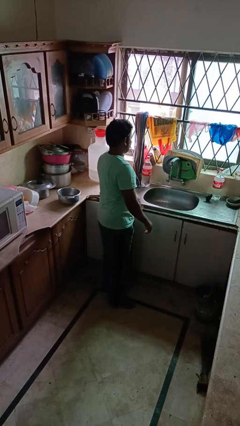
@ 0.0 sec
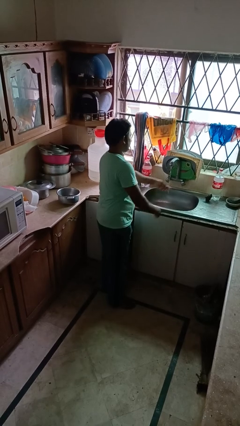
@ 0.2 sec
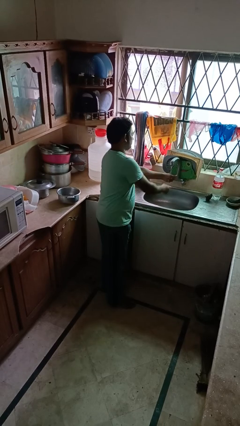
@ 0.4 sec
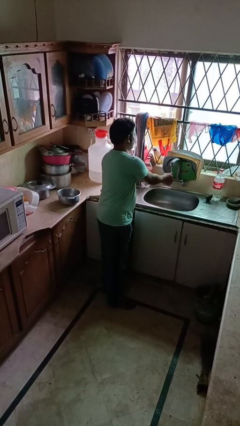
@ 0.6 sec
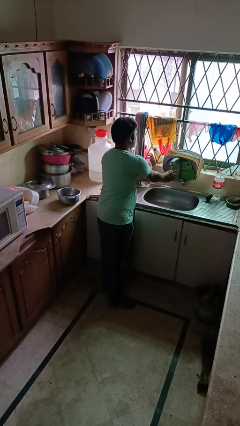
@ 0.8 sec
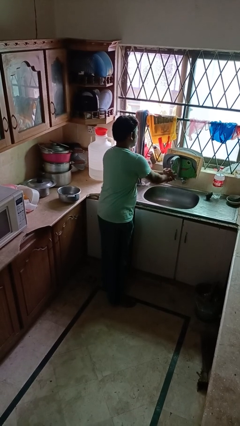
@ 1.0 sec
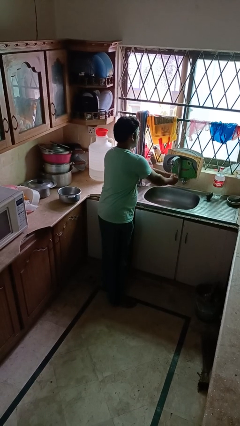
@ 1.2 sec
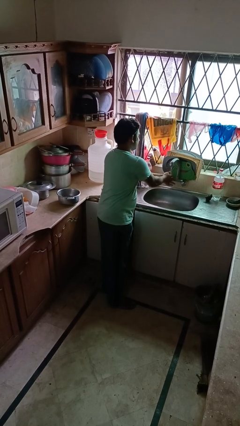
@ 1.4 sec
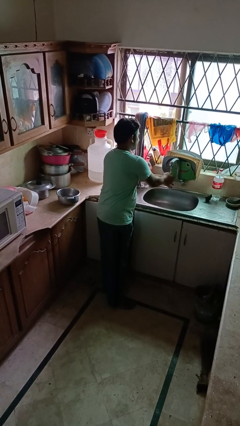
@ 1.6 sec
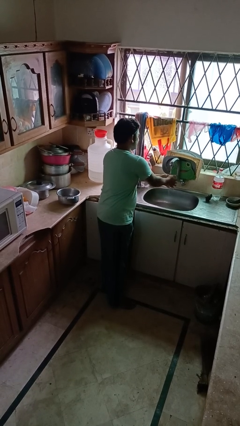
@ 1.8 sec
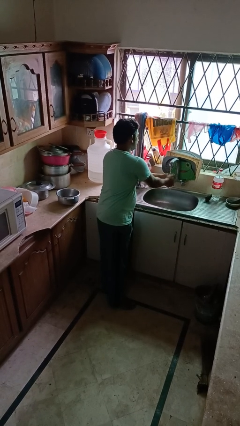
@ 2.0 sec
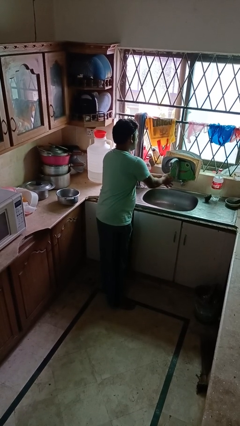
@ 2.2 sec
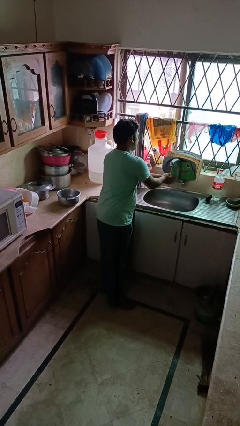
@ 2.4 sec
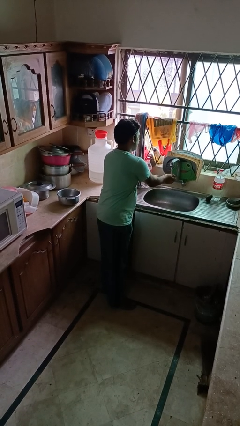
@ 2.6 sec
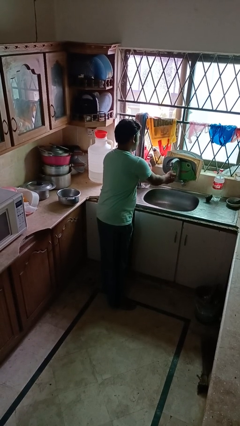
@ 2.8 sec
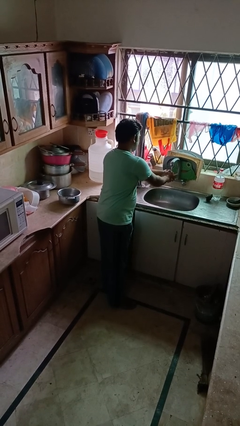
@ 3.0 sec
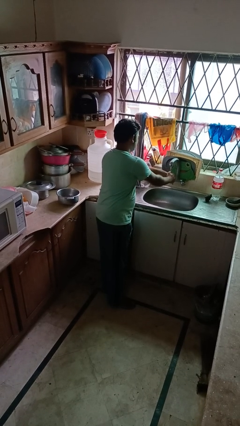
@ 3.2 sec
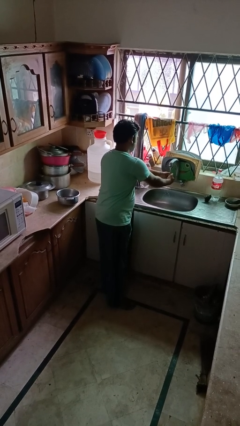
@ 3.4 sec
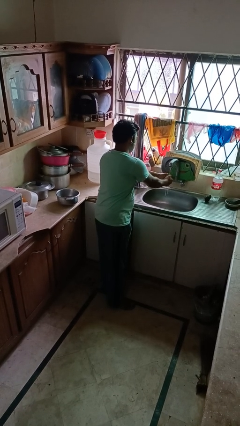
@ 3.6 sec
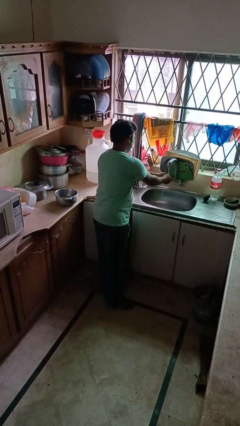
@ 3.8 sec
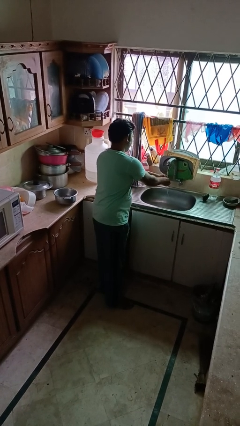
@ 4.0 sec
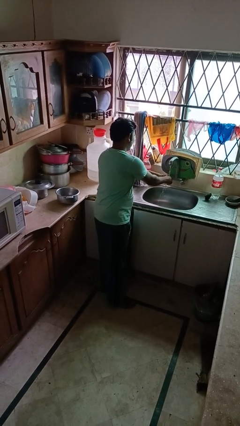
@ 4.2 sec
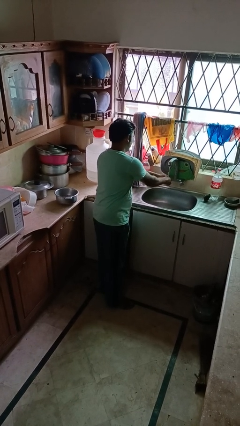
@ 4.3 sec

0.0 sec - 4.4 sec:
person washes hands

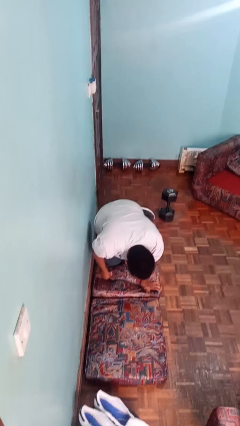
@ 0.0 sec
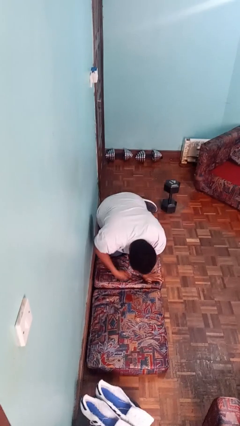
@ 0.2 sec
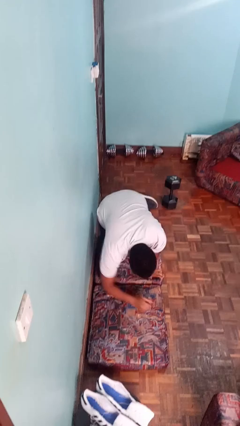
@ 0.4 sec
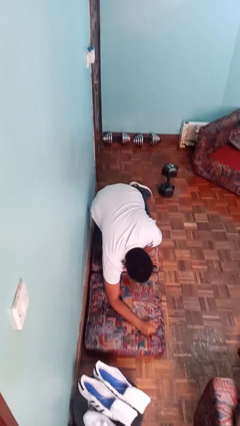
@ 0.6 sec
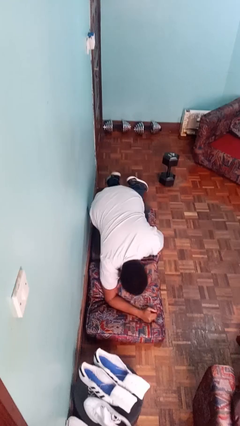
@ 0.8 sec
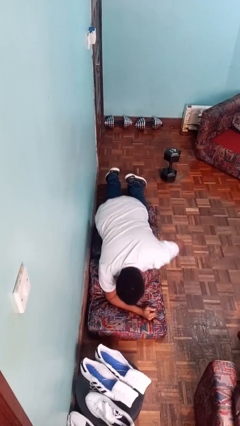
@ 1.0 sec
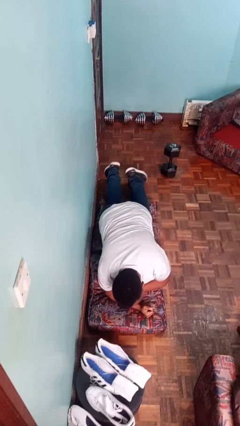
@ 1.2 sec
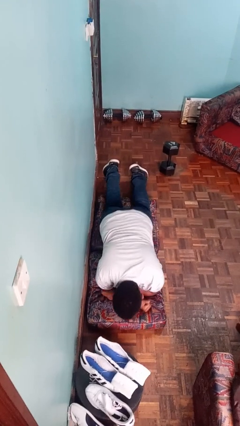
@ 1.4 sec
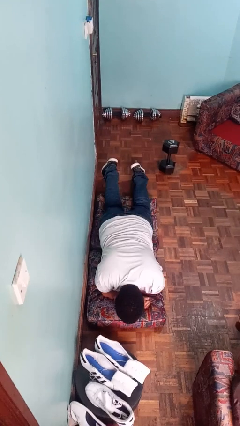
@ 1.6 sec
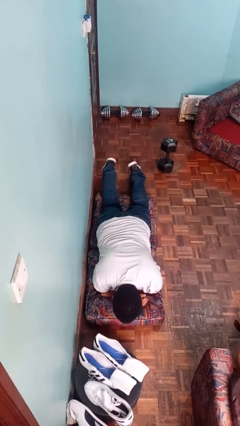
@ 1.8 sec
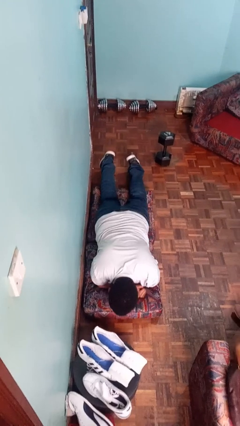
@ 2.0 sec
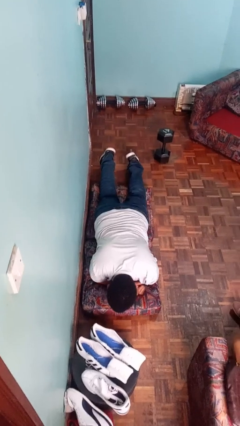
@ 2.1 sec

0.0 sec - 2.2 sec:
person lies down on floor

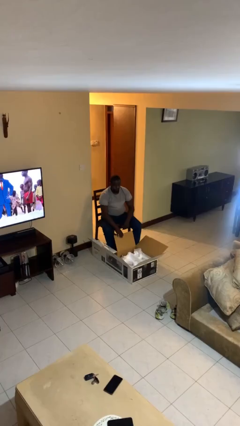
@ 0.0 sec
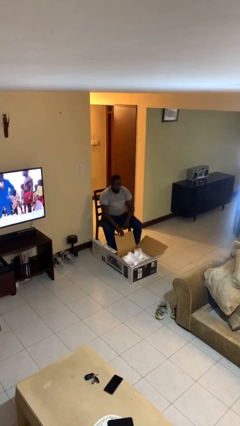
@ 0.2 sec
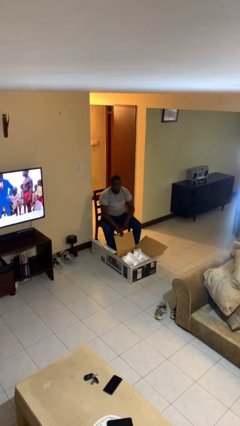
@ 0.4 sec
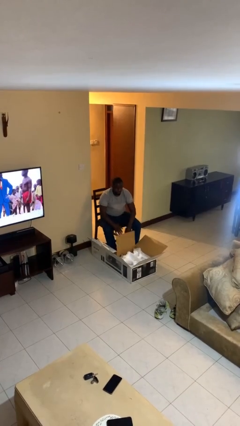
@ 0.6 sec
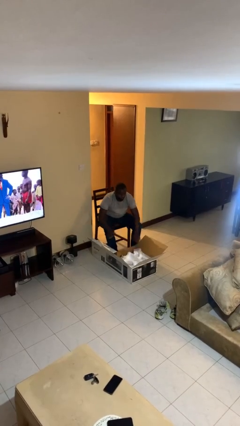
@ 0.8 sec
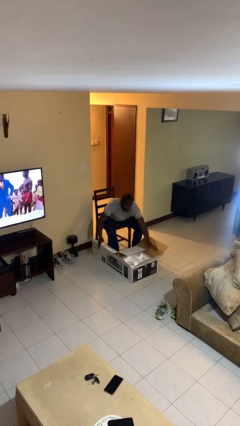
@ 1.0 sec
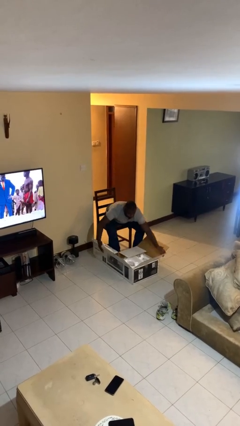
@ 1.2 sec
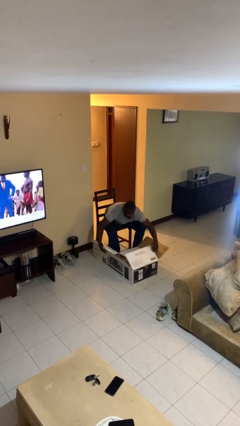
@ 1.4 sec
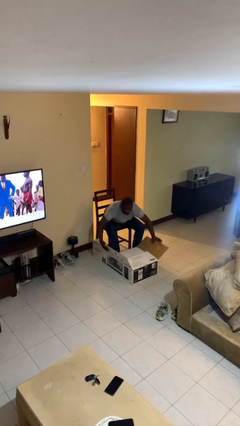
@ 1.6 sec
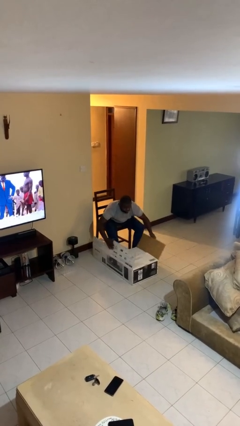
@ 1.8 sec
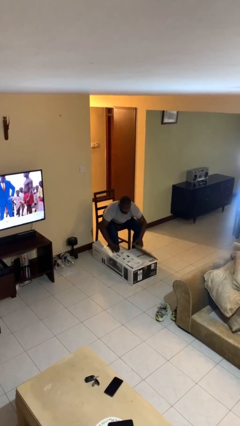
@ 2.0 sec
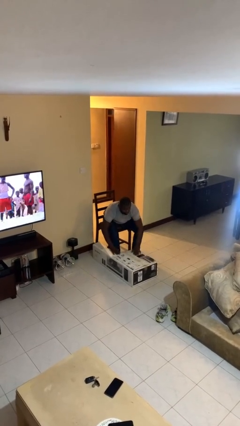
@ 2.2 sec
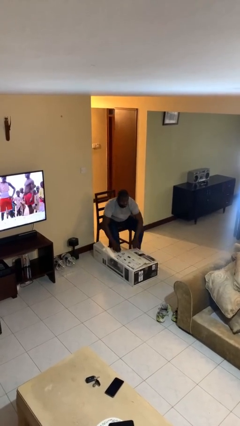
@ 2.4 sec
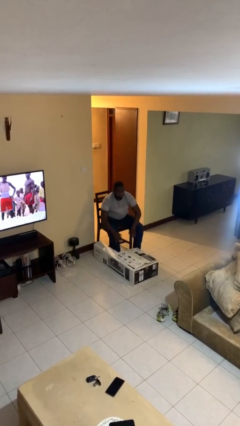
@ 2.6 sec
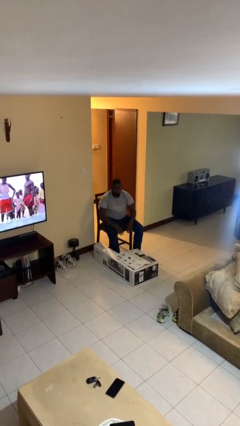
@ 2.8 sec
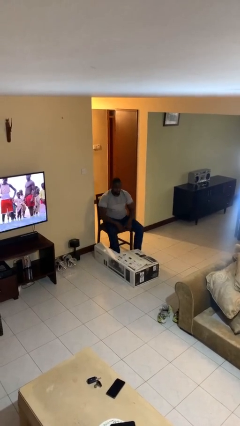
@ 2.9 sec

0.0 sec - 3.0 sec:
person closes box

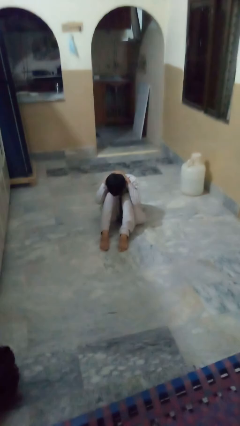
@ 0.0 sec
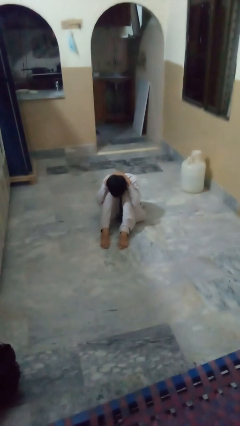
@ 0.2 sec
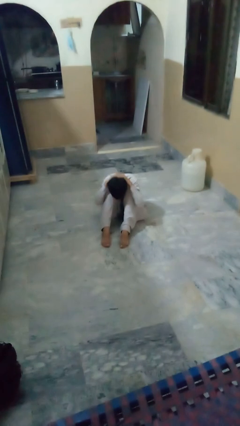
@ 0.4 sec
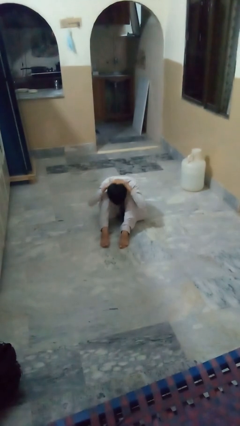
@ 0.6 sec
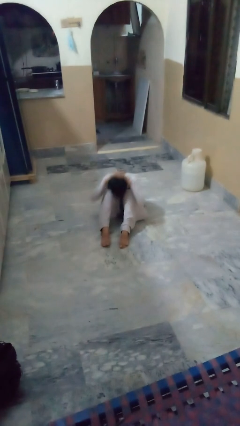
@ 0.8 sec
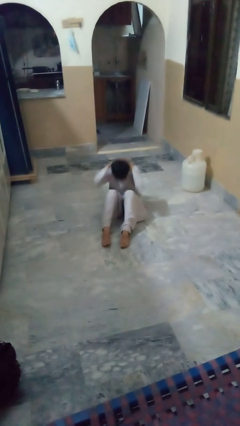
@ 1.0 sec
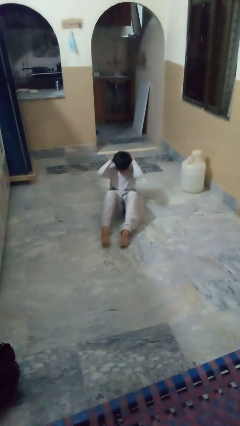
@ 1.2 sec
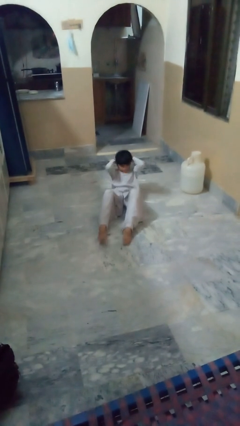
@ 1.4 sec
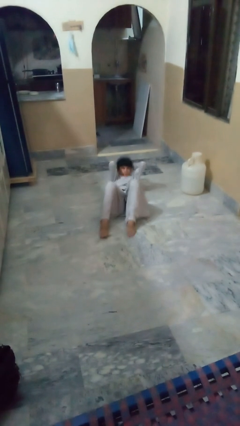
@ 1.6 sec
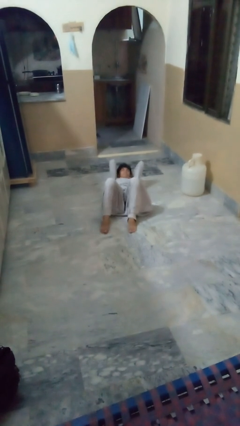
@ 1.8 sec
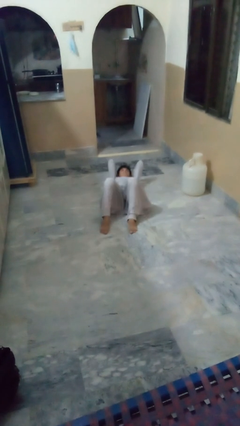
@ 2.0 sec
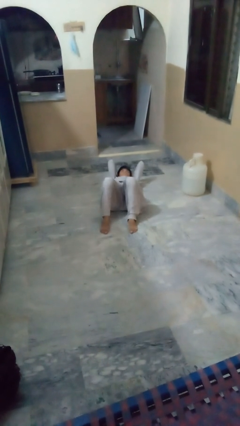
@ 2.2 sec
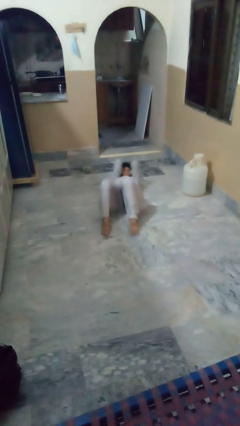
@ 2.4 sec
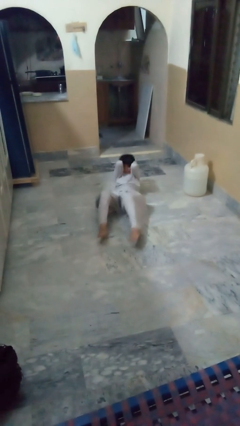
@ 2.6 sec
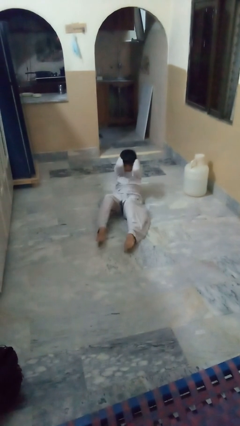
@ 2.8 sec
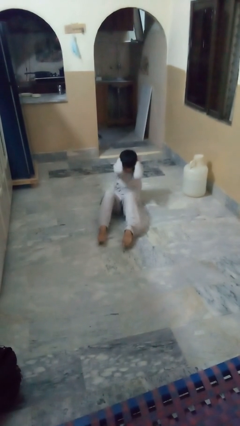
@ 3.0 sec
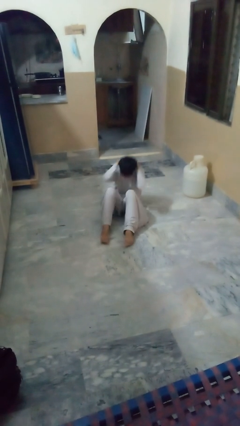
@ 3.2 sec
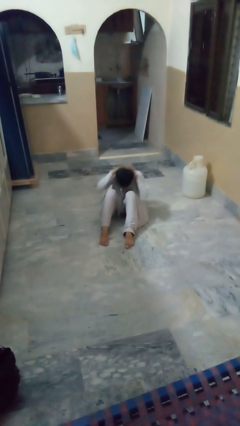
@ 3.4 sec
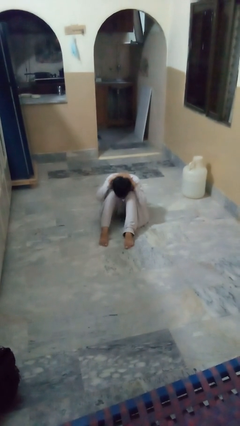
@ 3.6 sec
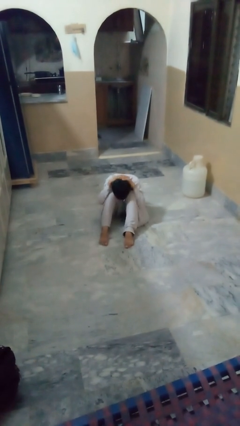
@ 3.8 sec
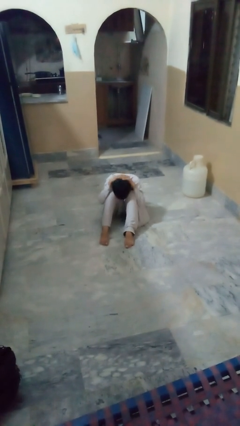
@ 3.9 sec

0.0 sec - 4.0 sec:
person exercises with situp

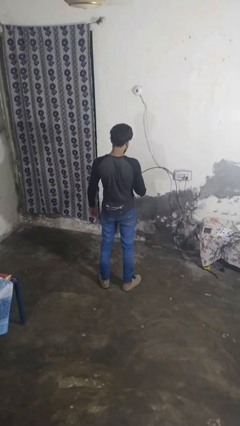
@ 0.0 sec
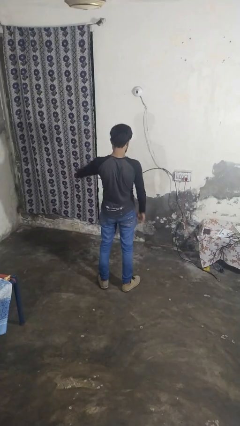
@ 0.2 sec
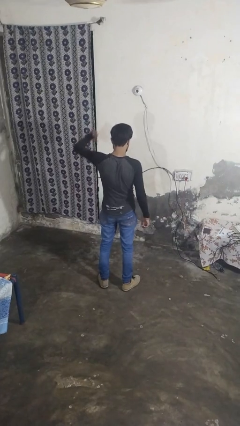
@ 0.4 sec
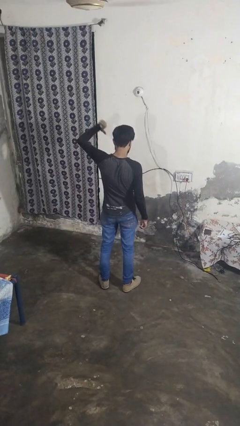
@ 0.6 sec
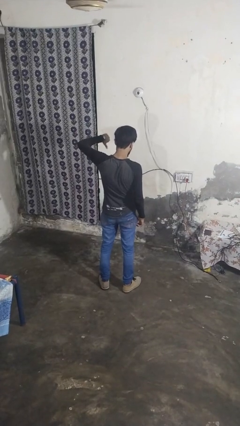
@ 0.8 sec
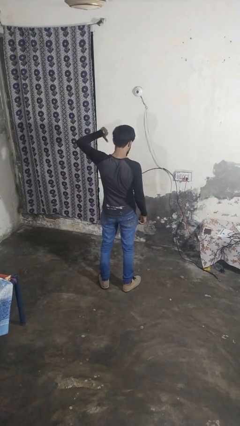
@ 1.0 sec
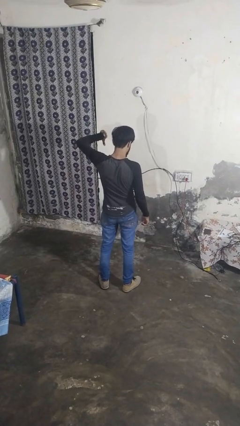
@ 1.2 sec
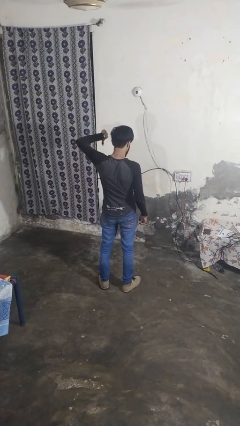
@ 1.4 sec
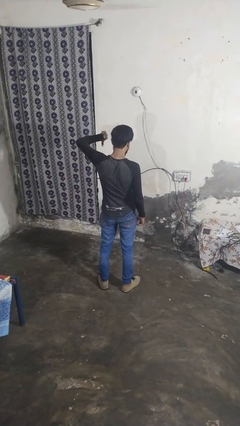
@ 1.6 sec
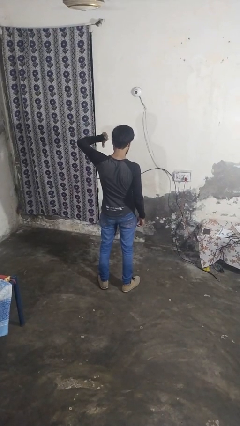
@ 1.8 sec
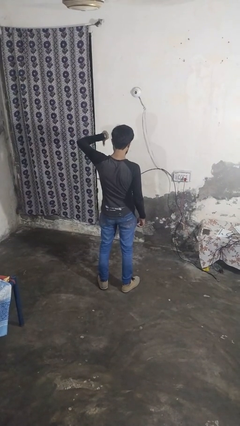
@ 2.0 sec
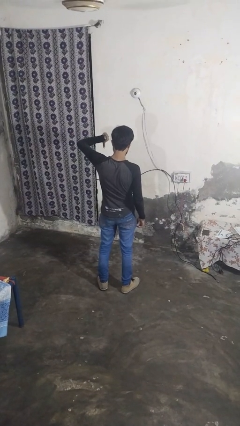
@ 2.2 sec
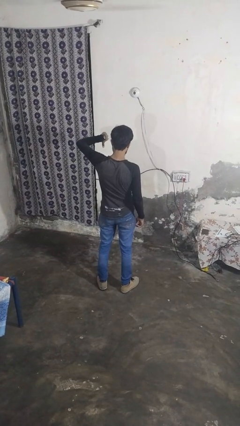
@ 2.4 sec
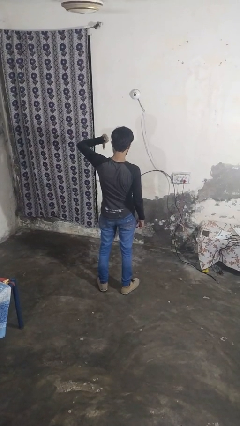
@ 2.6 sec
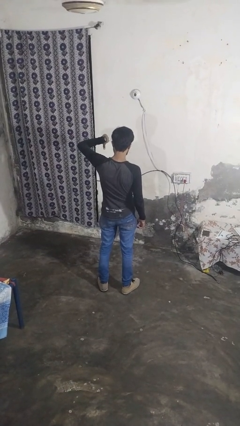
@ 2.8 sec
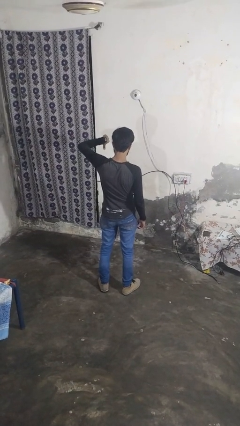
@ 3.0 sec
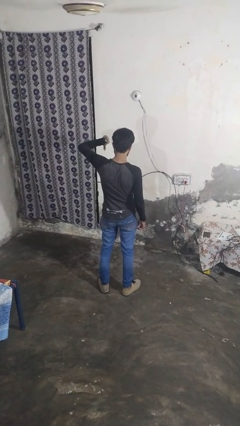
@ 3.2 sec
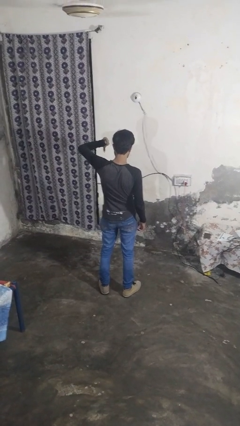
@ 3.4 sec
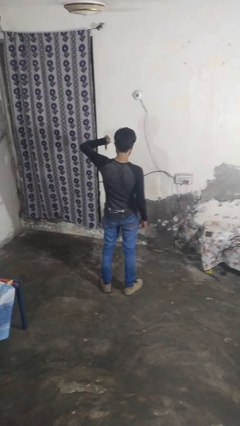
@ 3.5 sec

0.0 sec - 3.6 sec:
person gestures thumbs down
